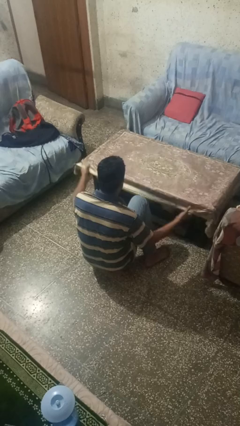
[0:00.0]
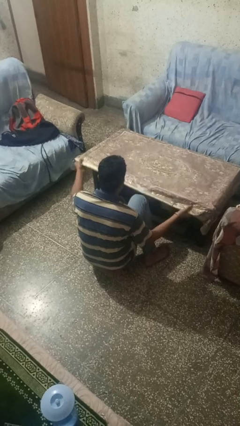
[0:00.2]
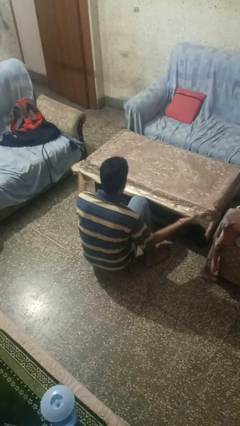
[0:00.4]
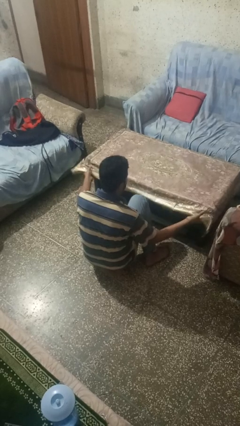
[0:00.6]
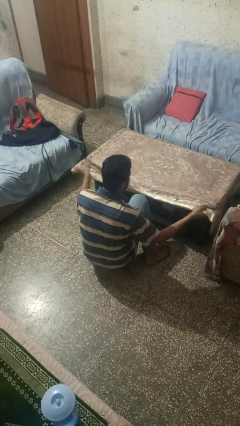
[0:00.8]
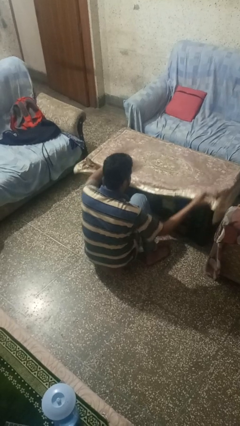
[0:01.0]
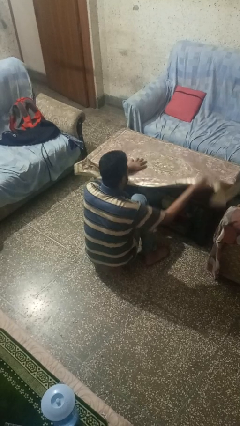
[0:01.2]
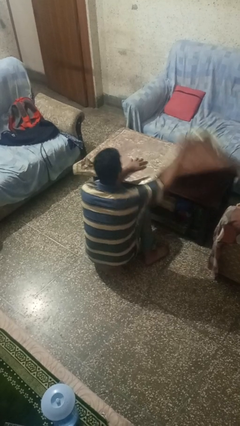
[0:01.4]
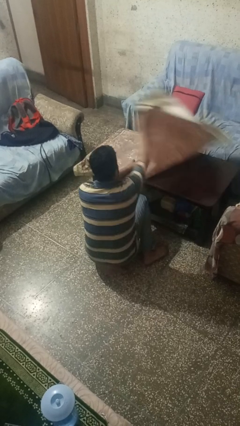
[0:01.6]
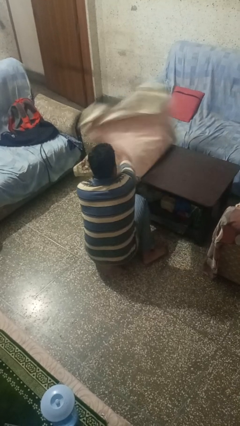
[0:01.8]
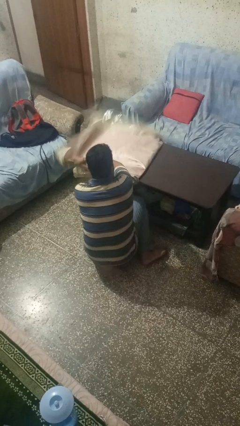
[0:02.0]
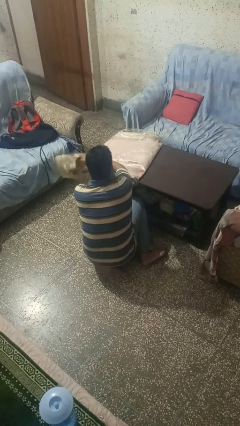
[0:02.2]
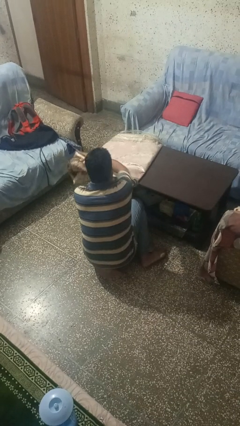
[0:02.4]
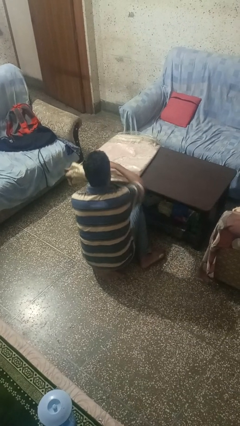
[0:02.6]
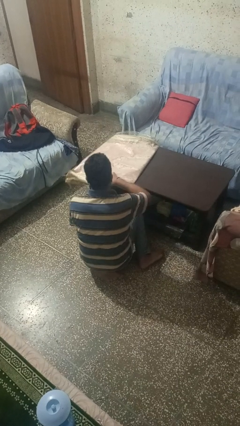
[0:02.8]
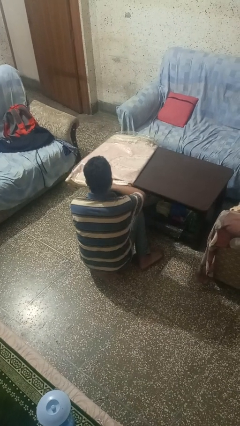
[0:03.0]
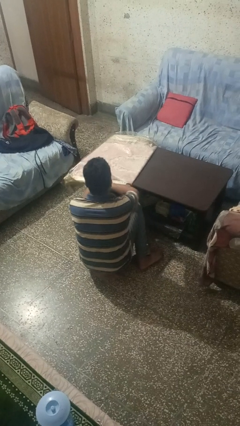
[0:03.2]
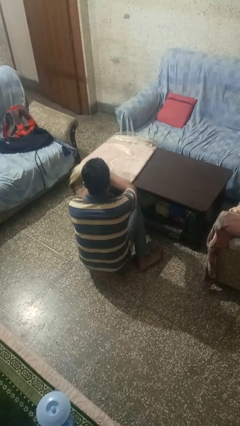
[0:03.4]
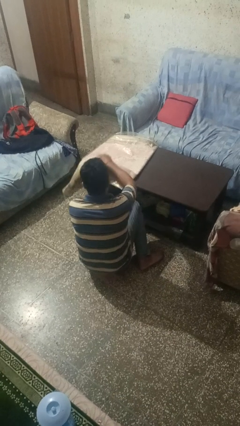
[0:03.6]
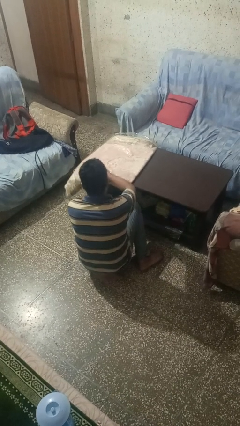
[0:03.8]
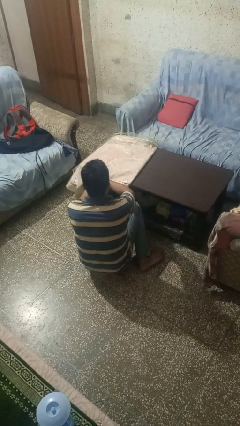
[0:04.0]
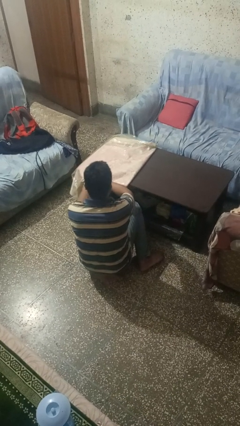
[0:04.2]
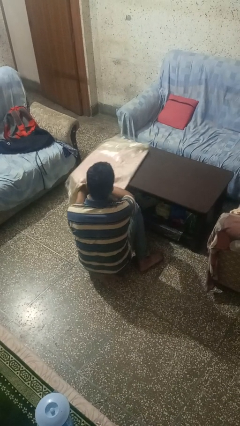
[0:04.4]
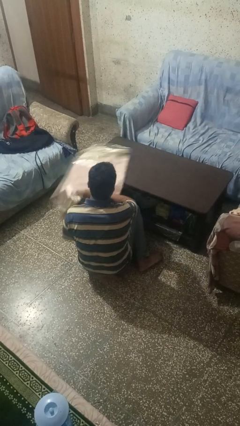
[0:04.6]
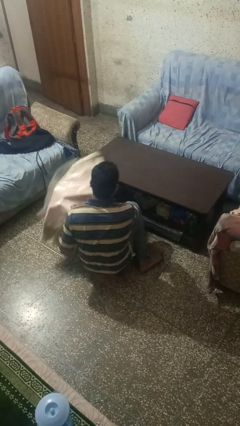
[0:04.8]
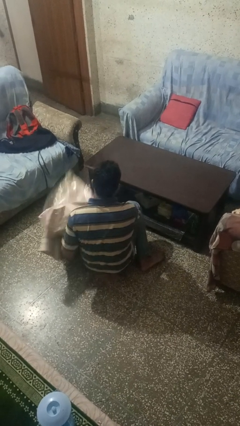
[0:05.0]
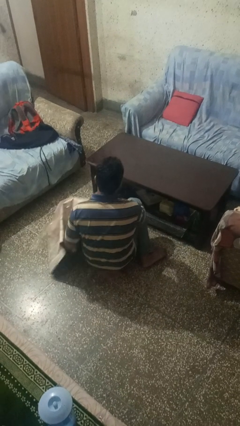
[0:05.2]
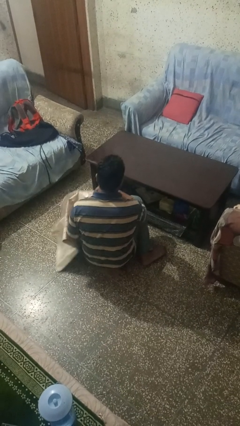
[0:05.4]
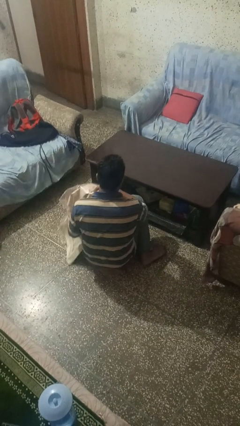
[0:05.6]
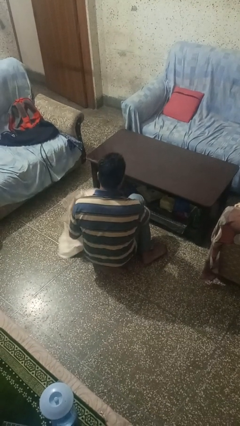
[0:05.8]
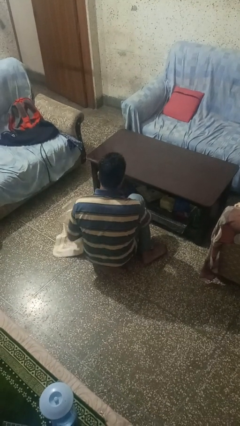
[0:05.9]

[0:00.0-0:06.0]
person folds tablecloth

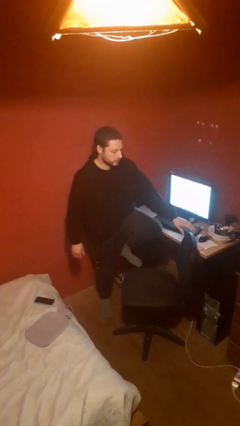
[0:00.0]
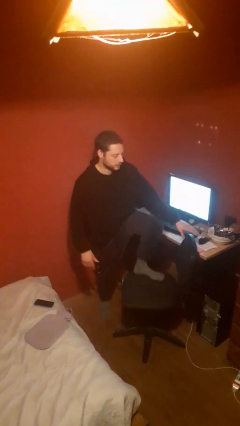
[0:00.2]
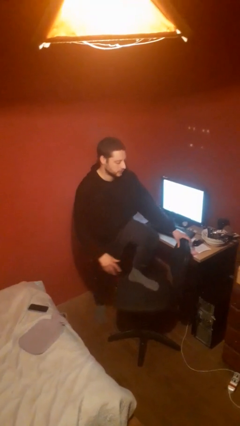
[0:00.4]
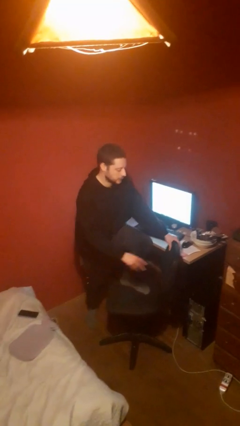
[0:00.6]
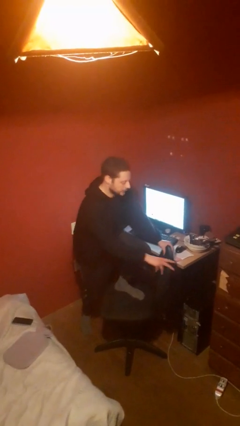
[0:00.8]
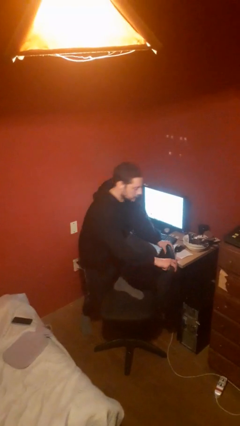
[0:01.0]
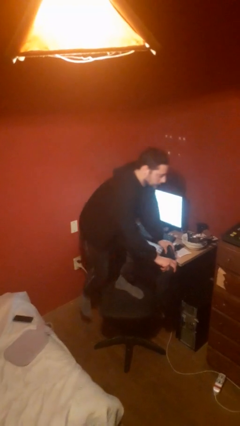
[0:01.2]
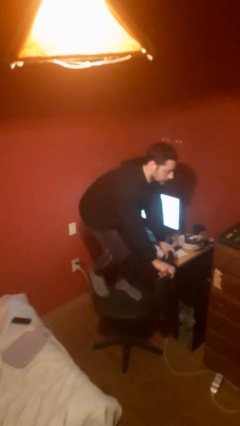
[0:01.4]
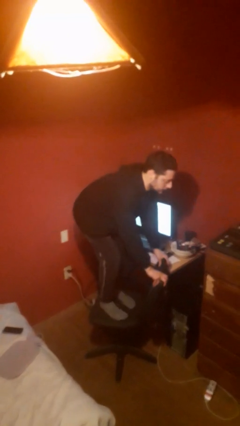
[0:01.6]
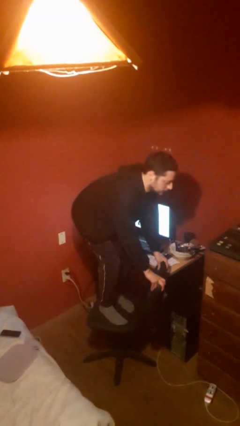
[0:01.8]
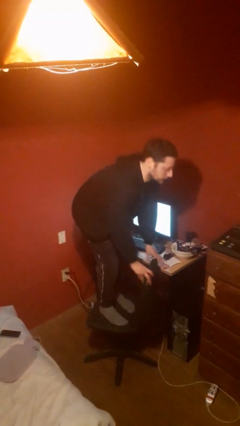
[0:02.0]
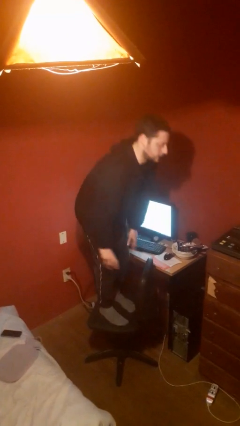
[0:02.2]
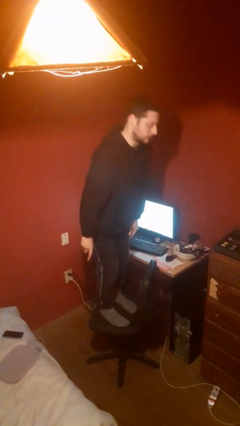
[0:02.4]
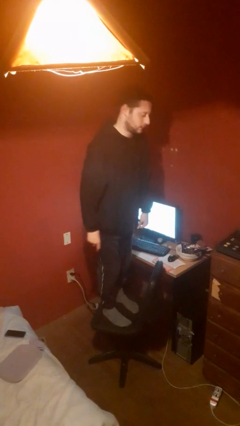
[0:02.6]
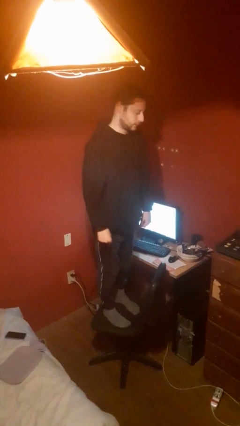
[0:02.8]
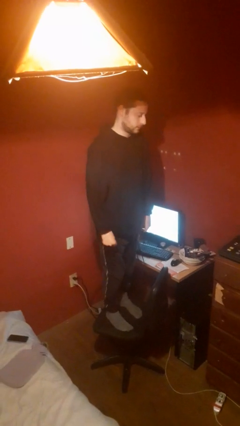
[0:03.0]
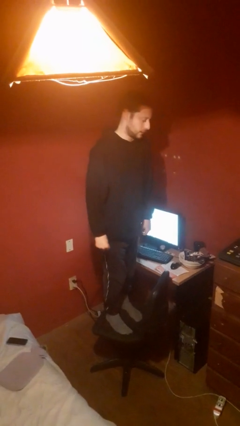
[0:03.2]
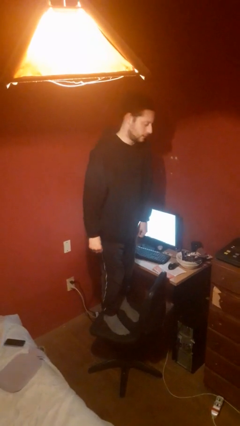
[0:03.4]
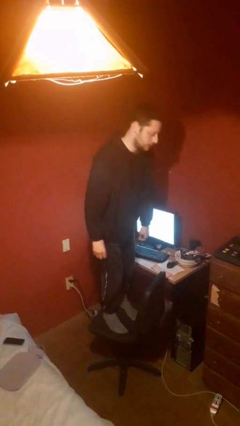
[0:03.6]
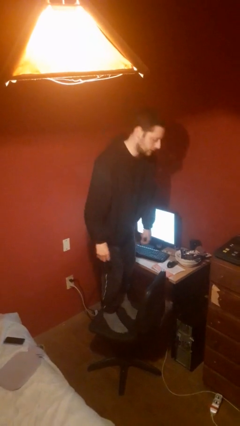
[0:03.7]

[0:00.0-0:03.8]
person climbs on chair

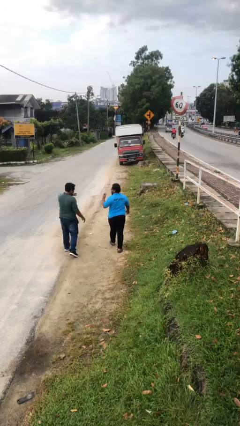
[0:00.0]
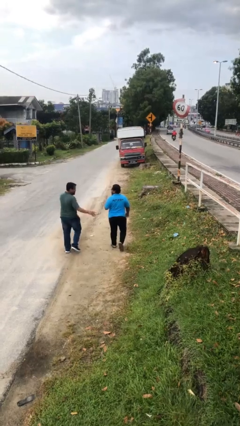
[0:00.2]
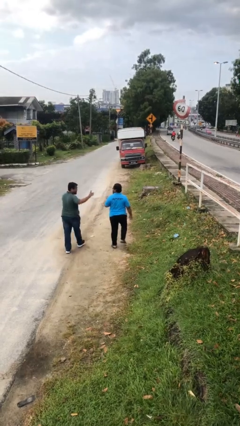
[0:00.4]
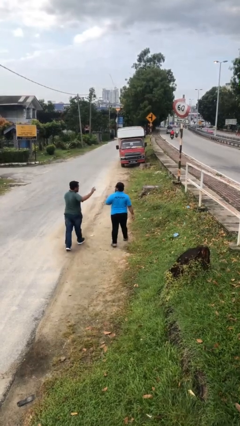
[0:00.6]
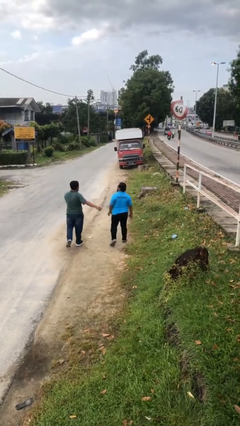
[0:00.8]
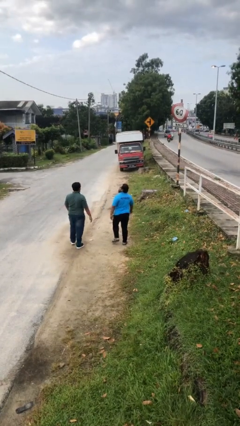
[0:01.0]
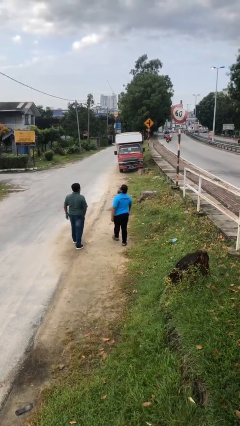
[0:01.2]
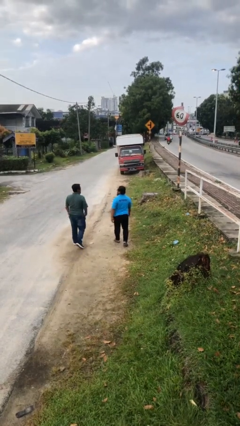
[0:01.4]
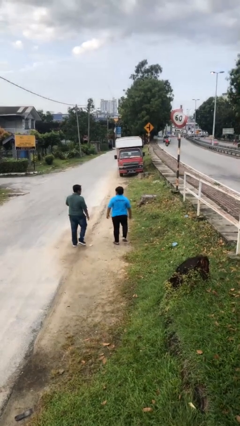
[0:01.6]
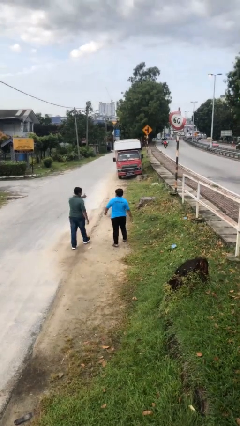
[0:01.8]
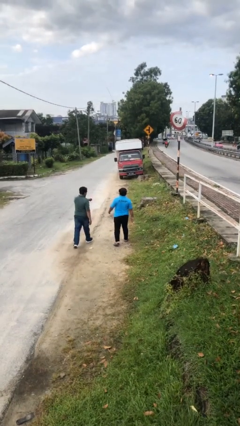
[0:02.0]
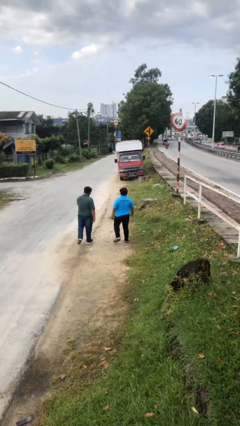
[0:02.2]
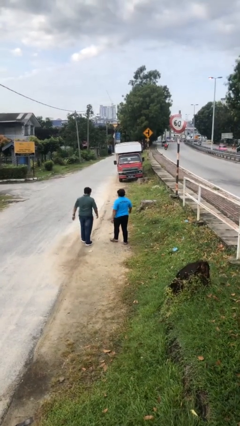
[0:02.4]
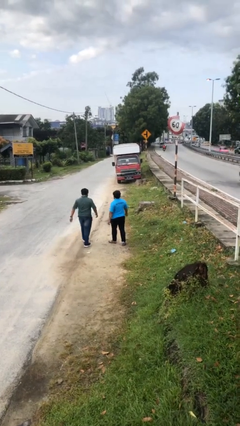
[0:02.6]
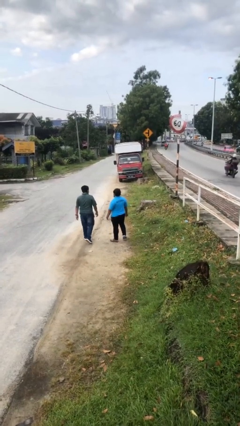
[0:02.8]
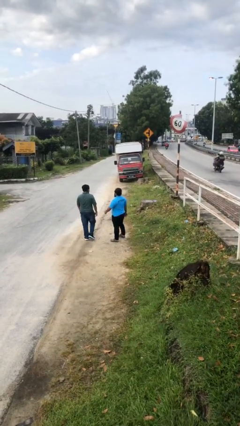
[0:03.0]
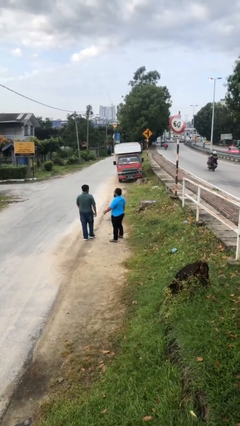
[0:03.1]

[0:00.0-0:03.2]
person talks to person

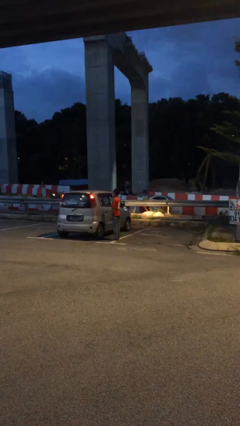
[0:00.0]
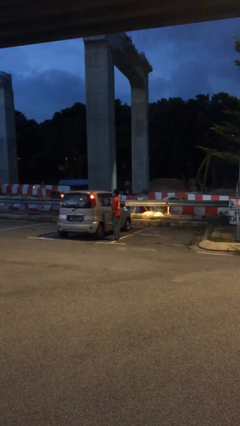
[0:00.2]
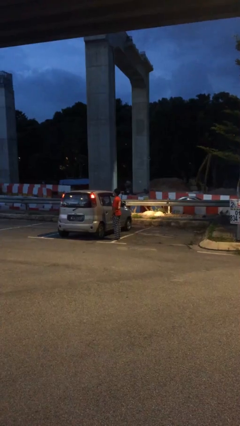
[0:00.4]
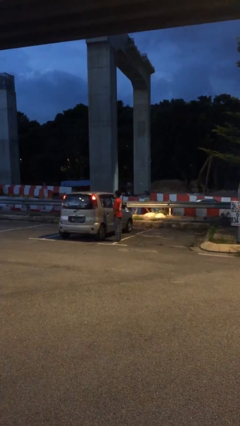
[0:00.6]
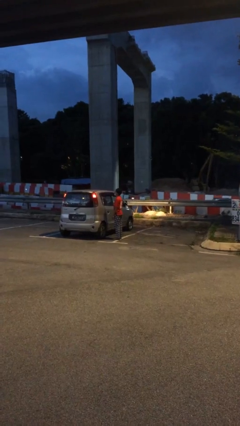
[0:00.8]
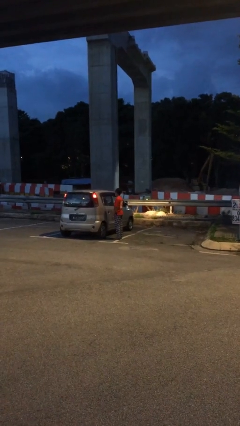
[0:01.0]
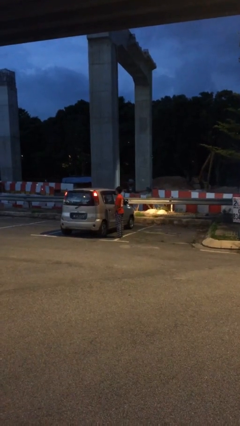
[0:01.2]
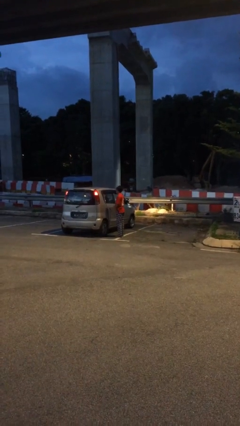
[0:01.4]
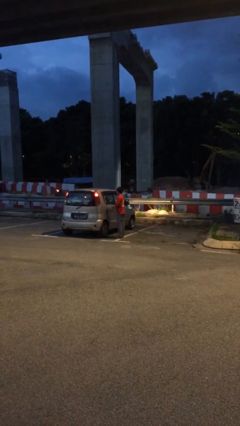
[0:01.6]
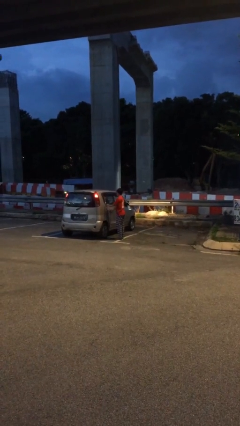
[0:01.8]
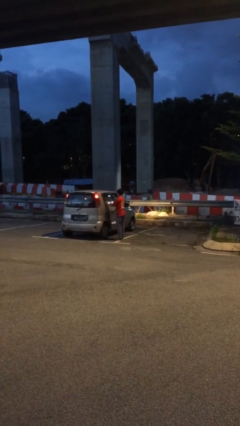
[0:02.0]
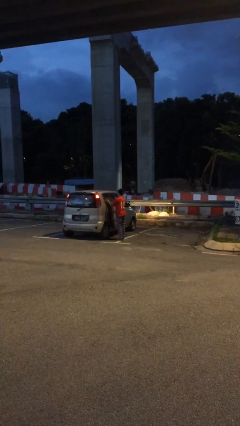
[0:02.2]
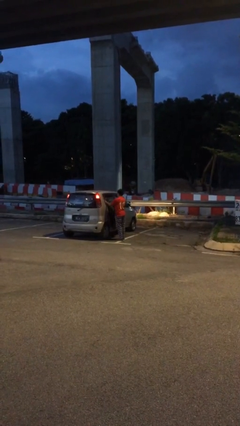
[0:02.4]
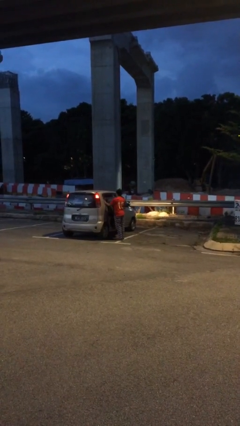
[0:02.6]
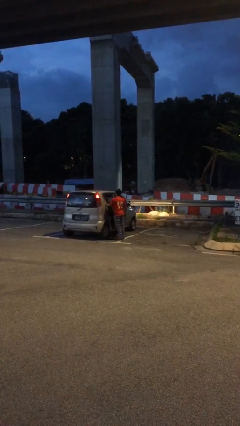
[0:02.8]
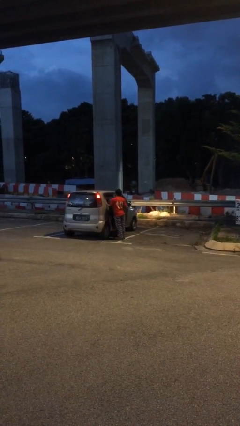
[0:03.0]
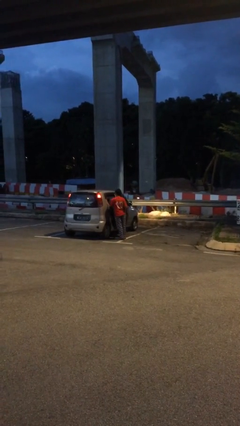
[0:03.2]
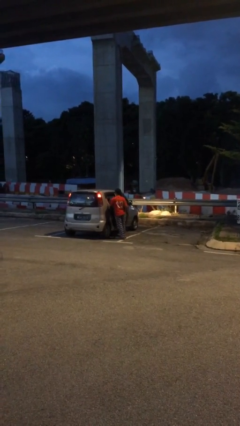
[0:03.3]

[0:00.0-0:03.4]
person opens car door

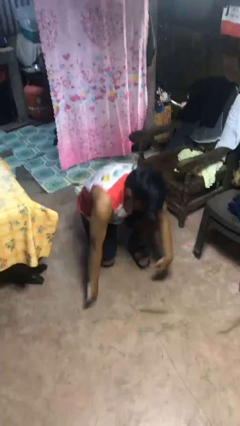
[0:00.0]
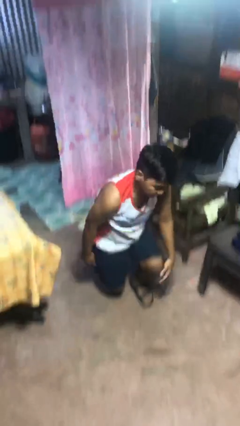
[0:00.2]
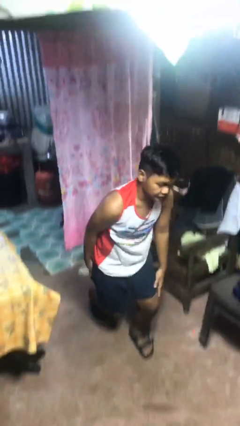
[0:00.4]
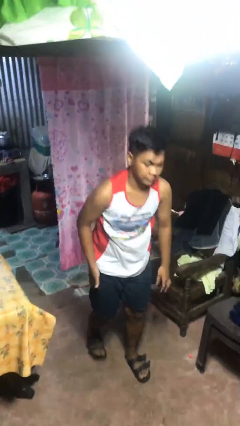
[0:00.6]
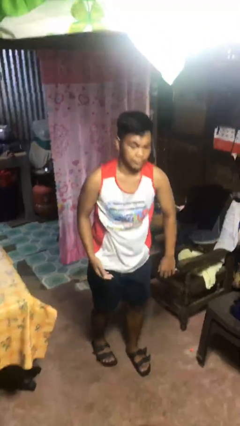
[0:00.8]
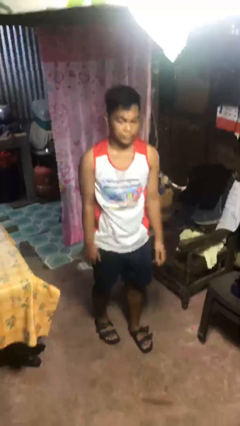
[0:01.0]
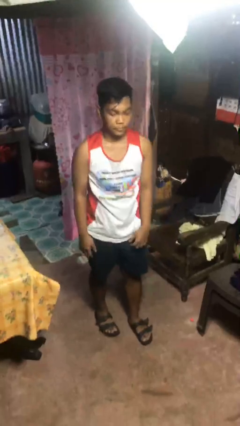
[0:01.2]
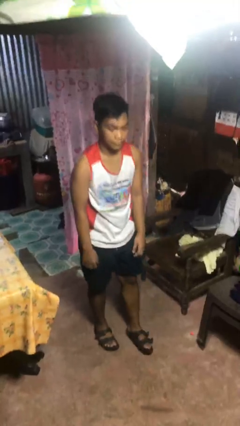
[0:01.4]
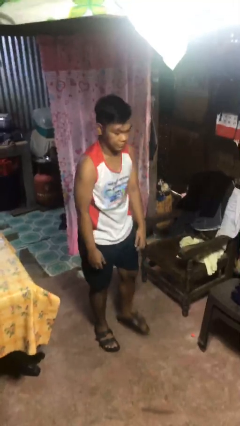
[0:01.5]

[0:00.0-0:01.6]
person stands up from floor
